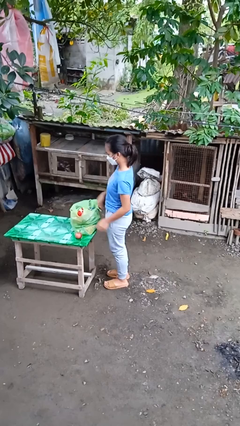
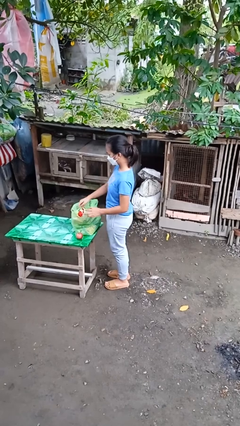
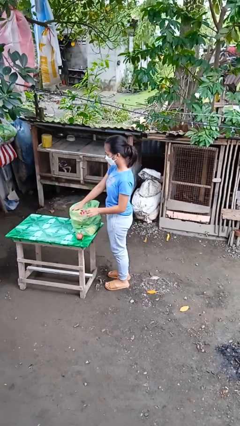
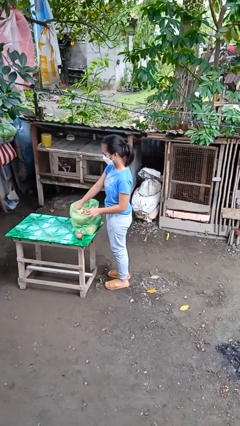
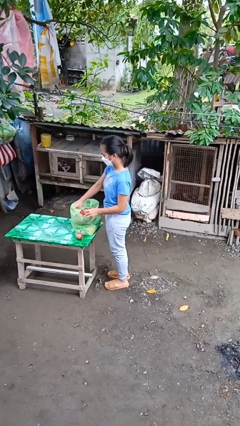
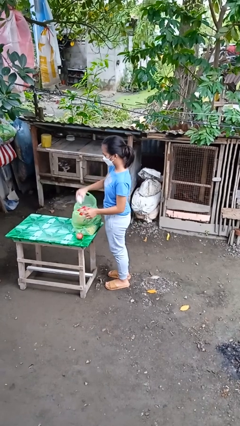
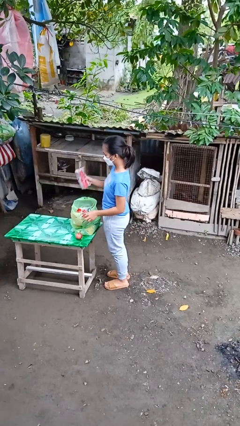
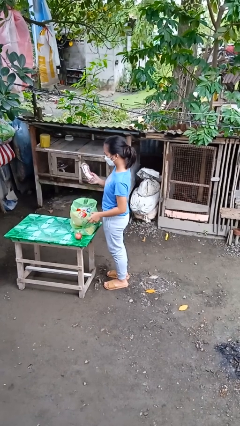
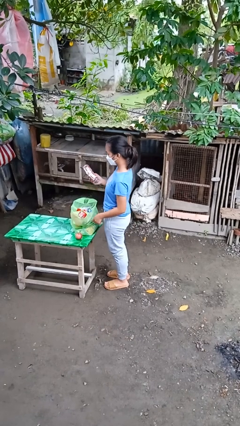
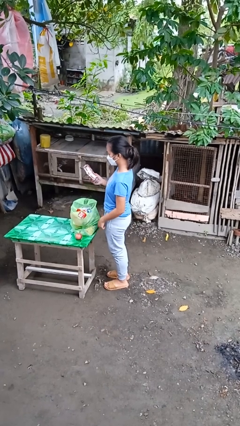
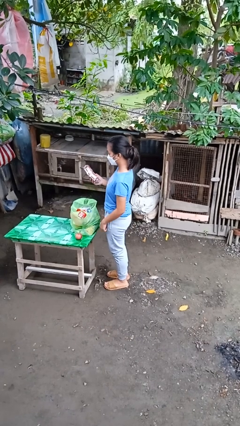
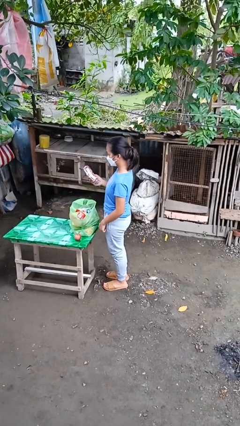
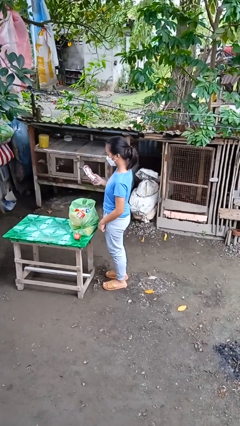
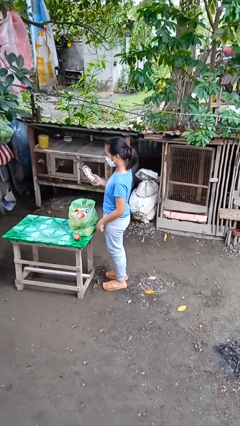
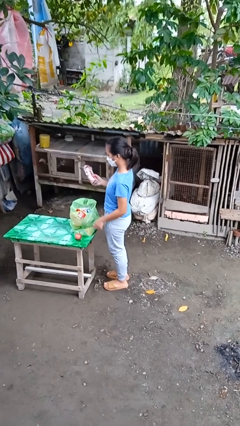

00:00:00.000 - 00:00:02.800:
person takes object from bag

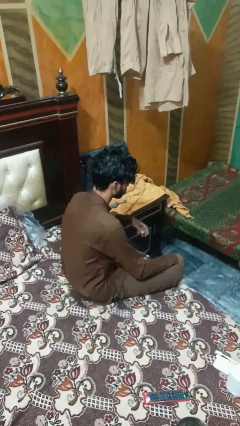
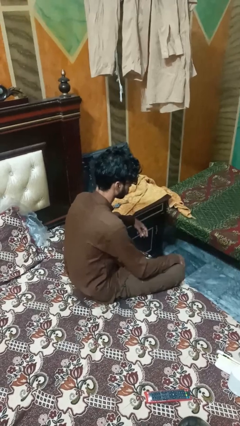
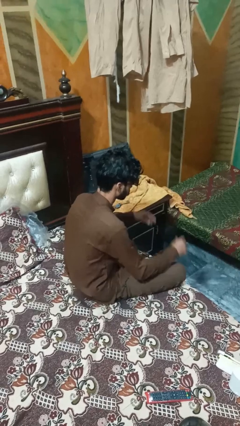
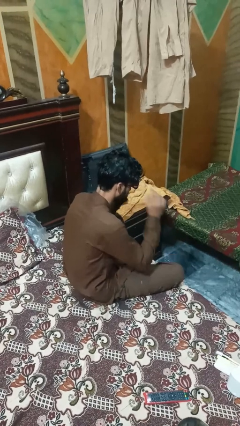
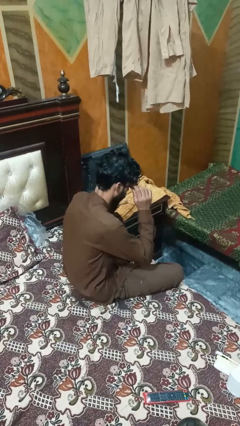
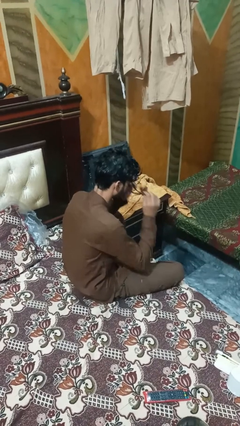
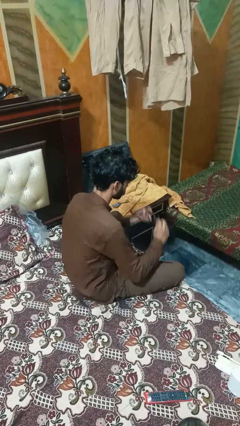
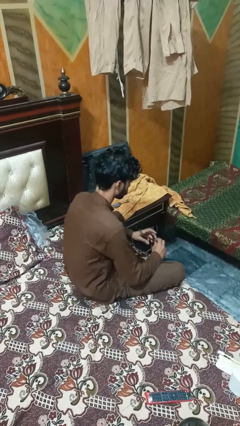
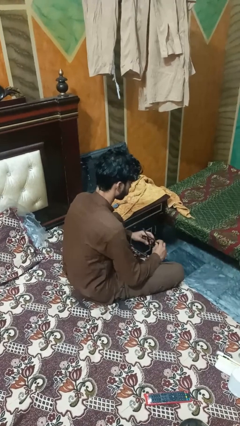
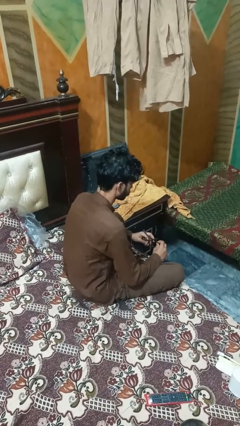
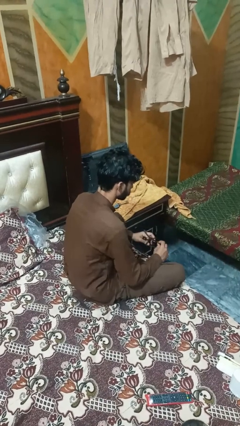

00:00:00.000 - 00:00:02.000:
person takes off sunglasses

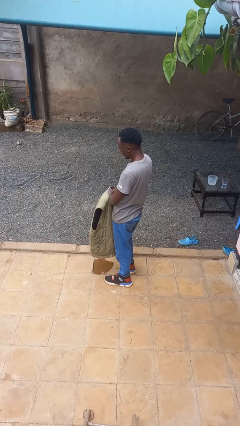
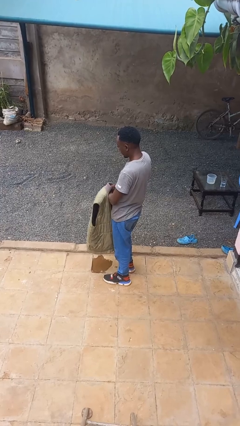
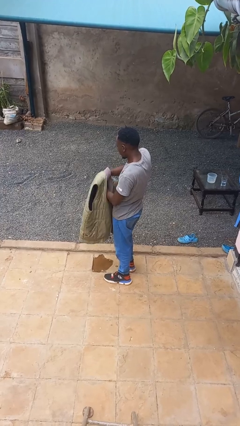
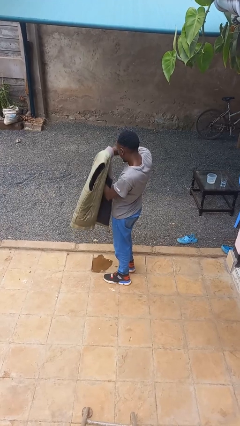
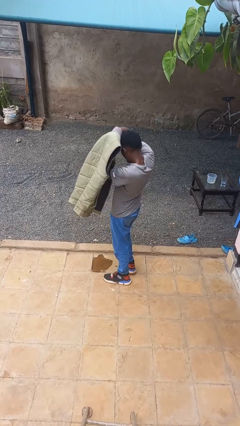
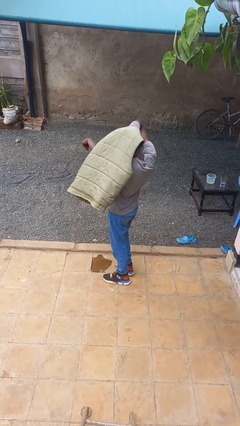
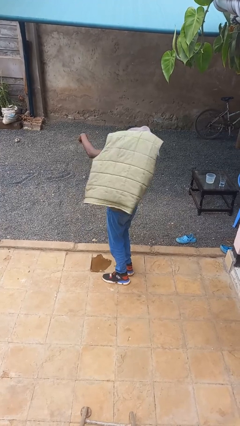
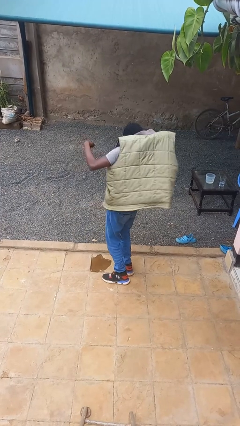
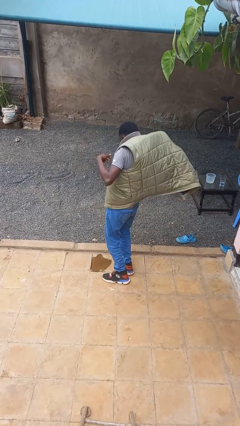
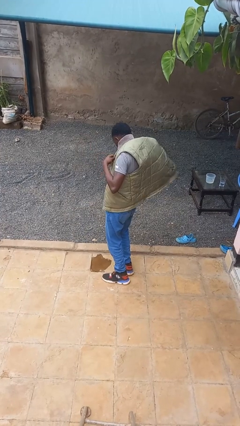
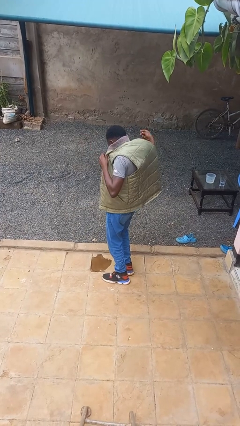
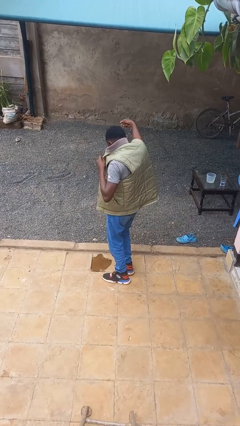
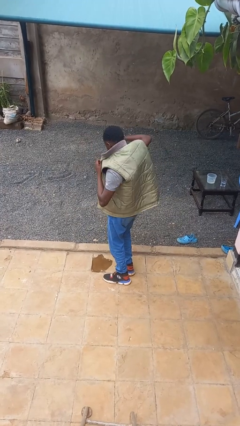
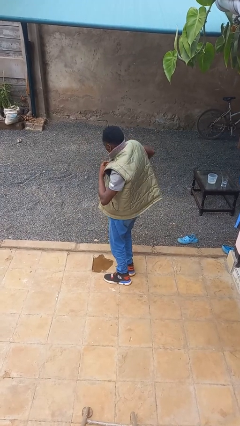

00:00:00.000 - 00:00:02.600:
person puts on jacket

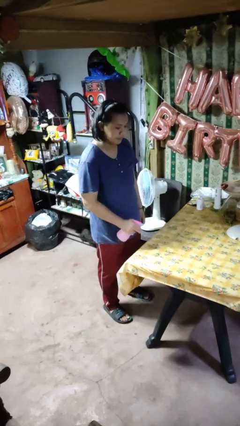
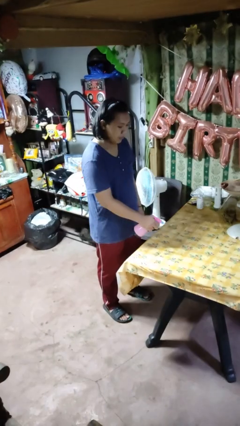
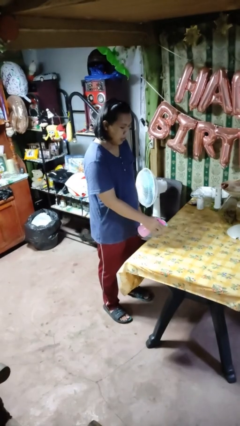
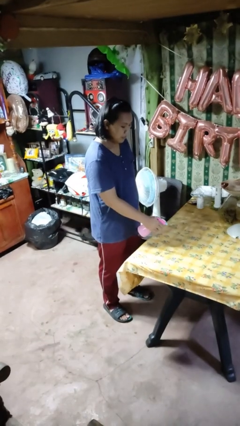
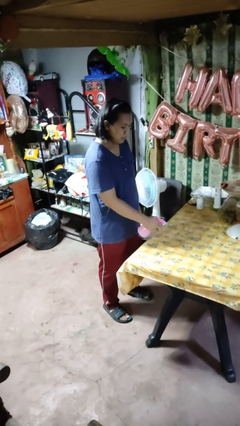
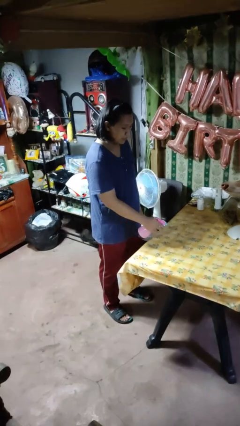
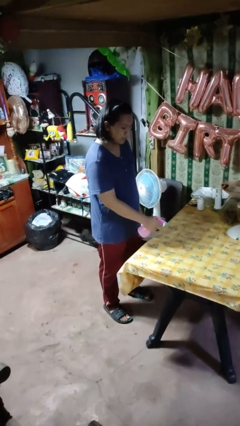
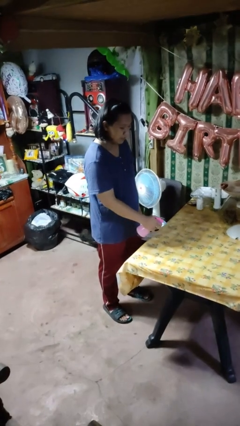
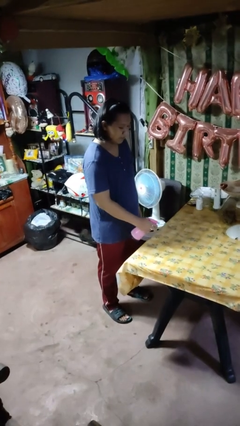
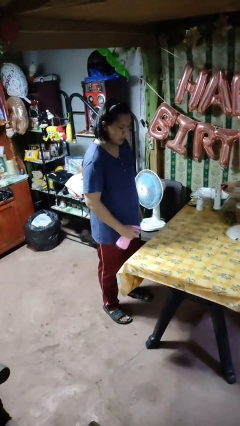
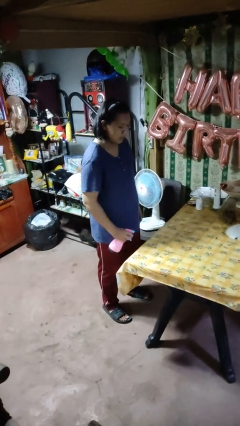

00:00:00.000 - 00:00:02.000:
person sprays from bottle

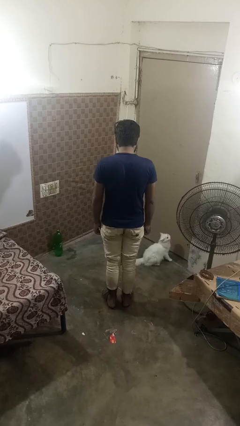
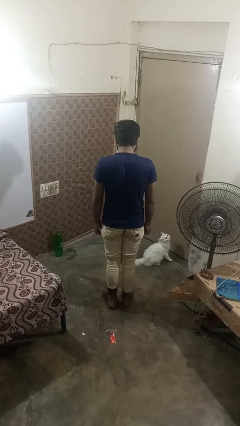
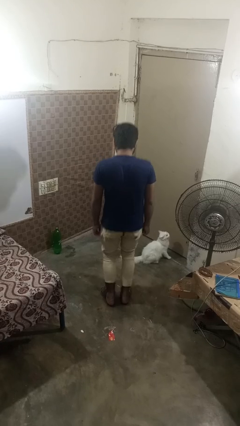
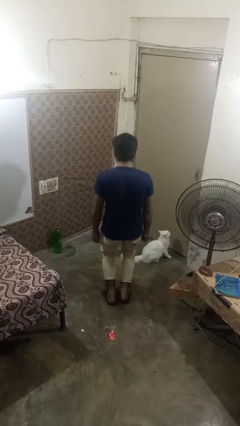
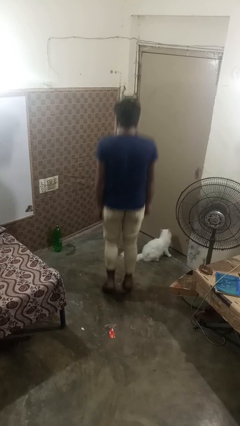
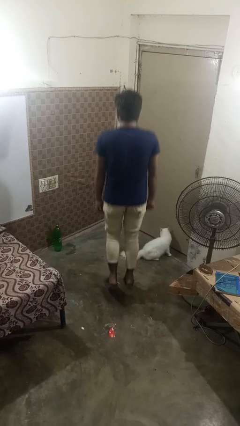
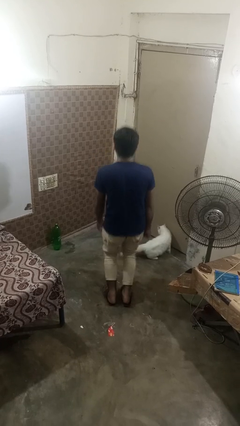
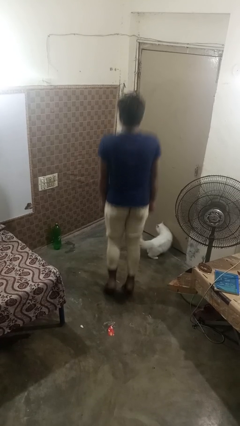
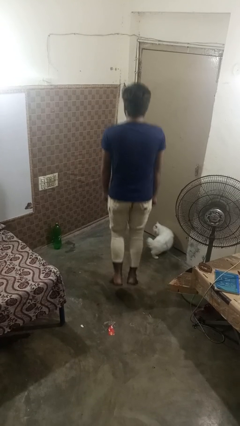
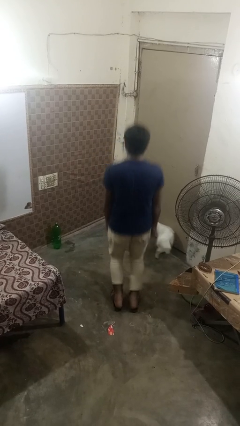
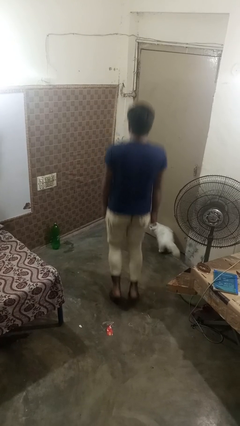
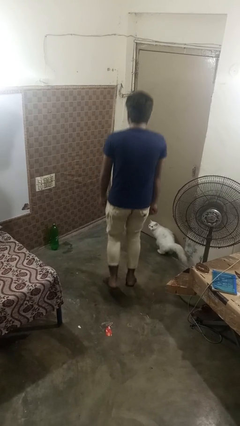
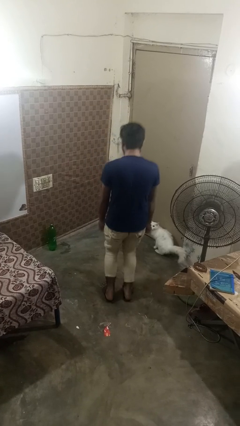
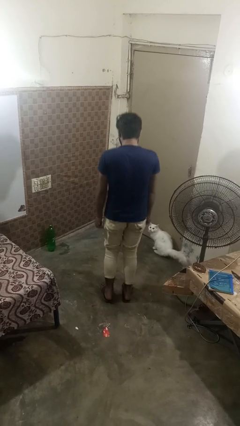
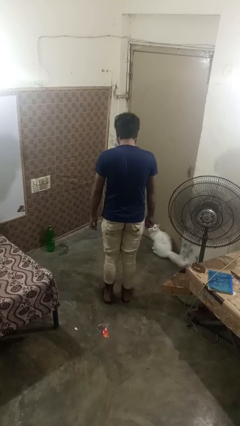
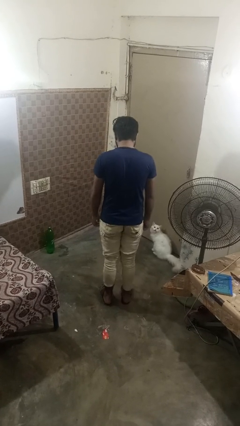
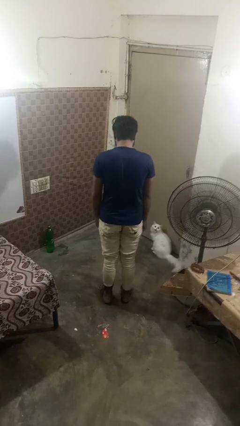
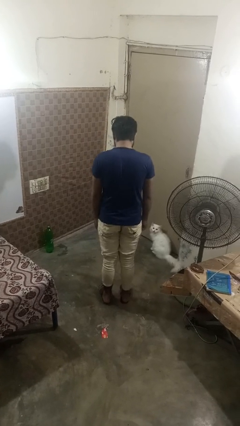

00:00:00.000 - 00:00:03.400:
person jumps

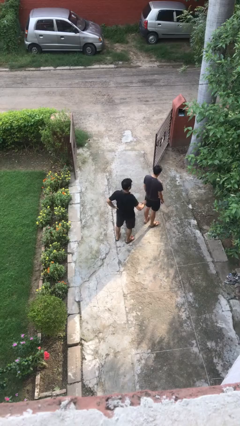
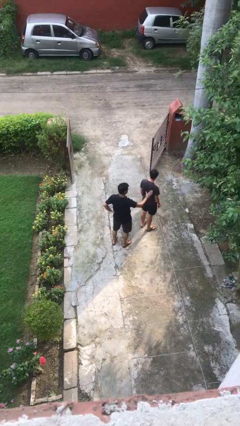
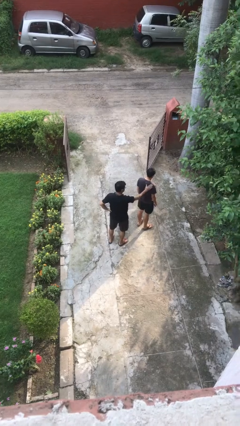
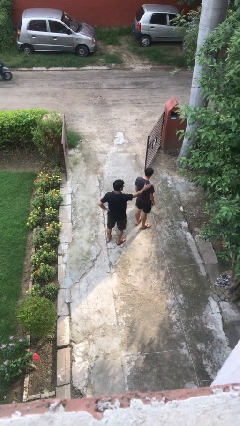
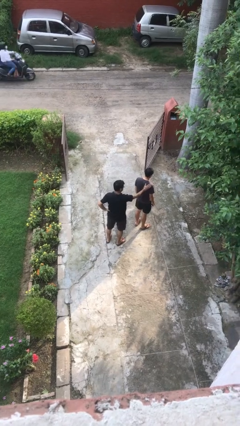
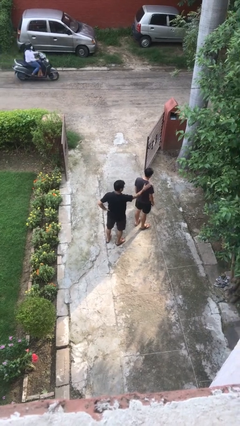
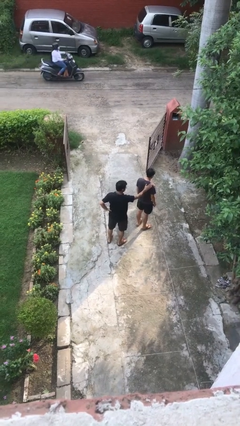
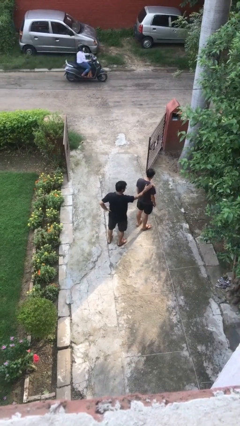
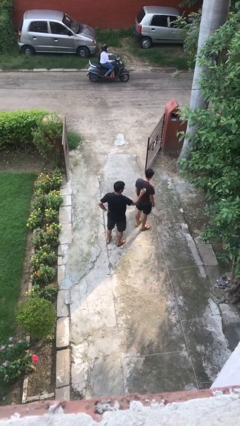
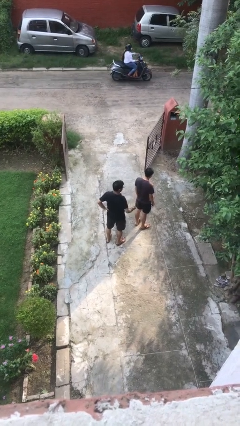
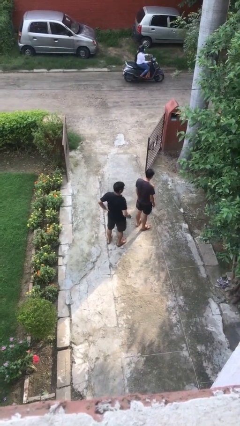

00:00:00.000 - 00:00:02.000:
person touches back of person

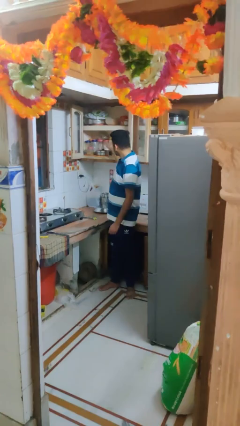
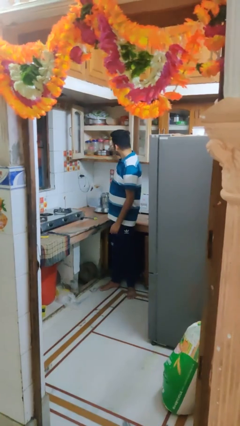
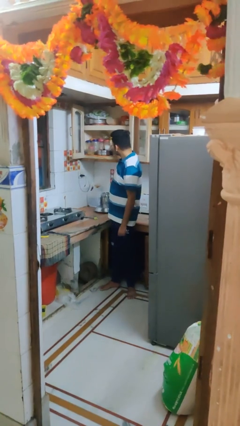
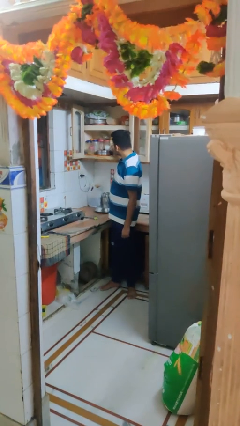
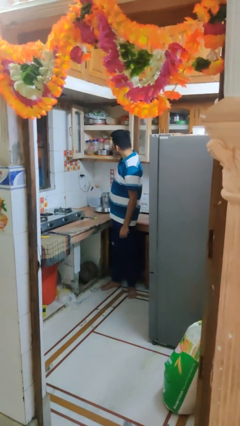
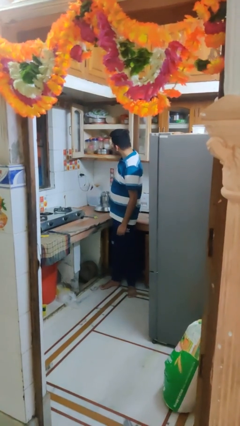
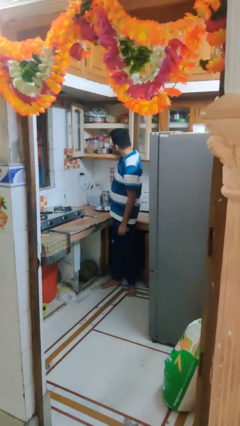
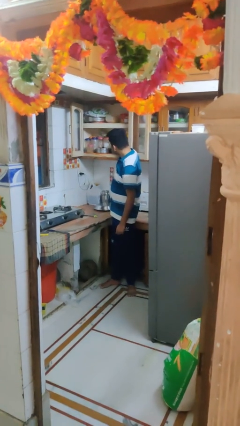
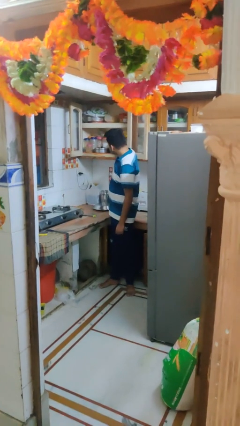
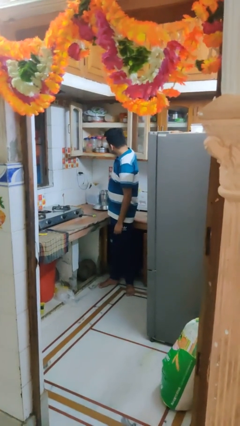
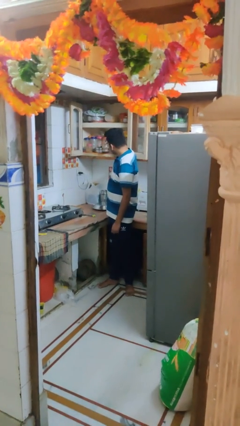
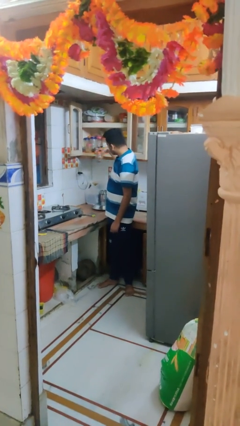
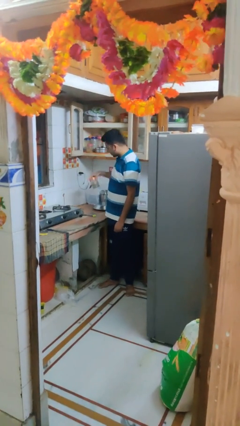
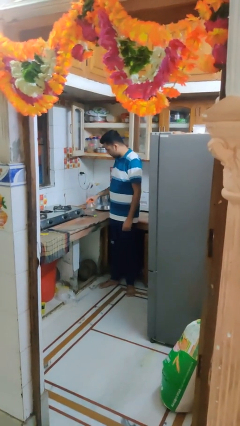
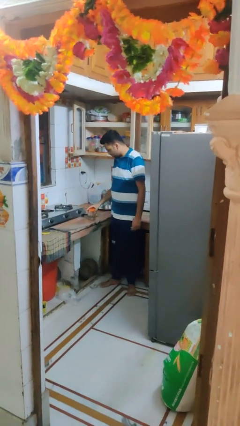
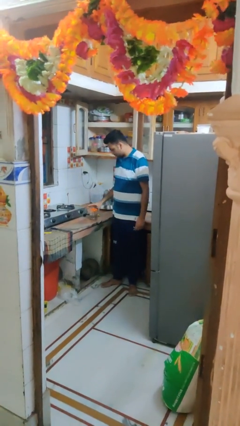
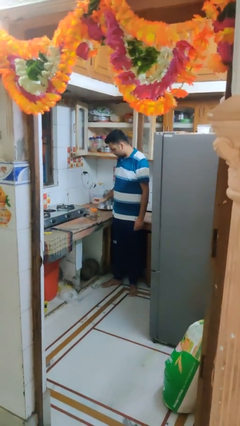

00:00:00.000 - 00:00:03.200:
person takes object from cabinet
